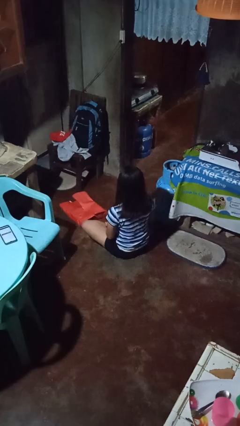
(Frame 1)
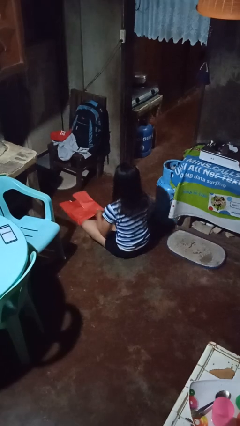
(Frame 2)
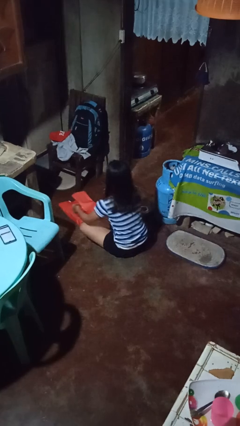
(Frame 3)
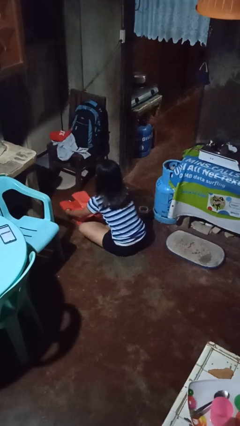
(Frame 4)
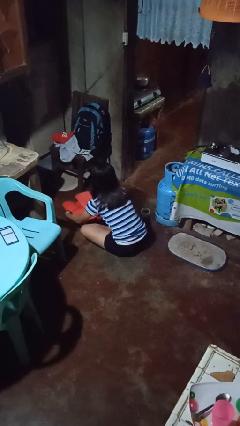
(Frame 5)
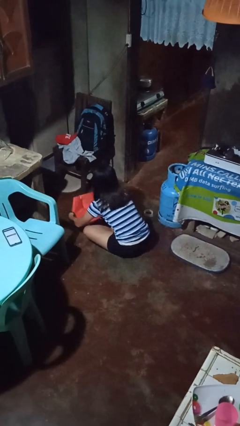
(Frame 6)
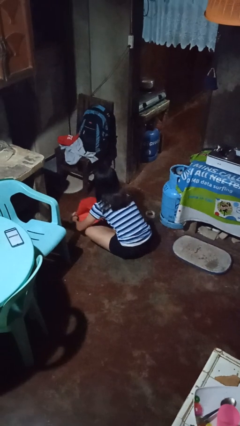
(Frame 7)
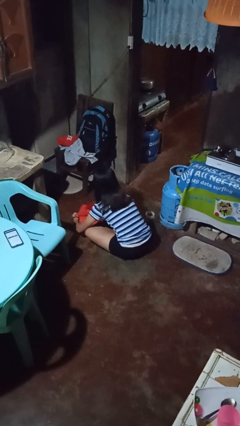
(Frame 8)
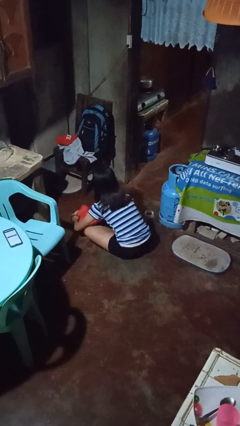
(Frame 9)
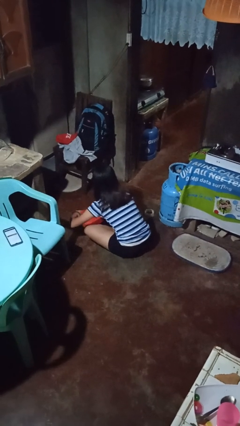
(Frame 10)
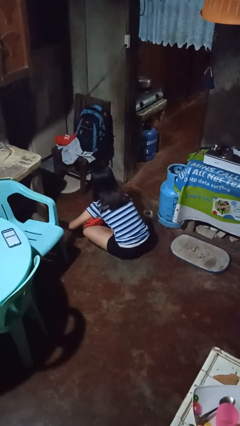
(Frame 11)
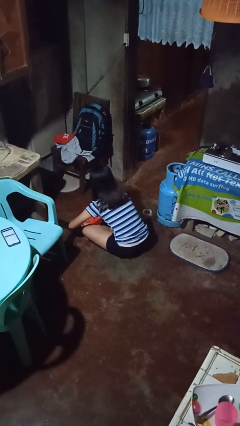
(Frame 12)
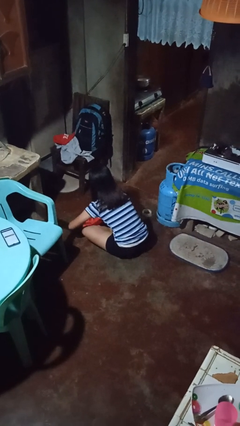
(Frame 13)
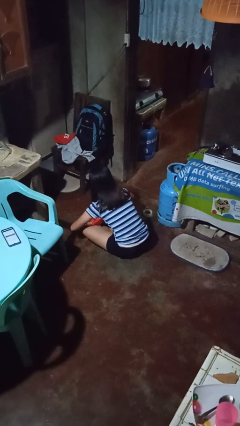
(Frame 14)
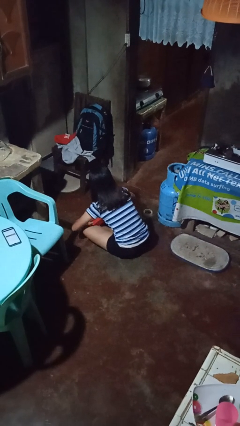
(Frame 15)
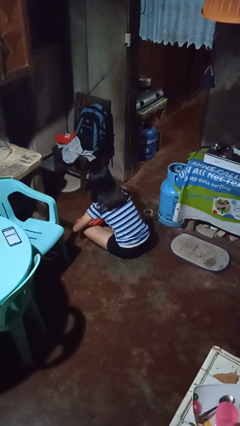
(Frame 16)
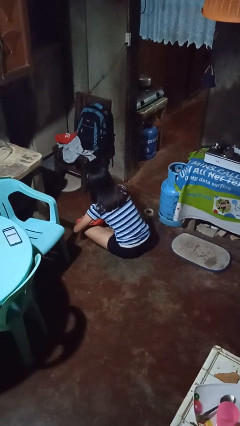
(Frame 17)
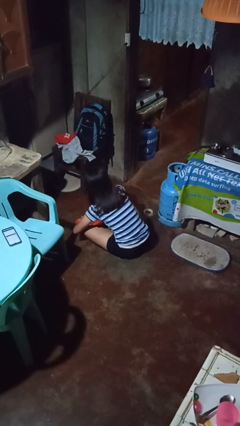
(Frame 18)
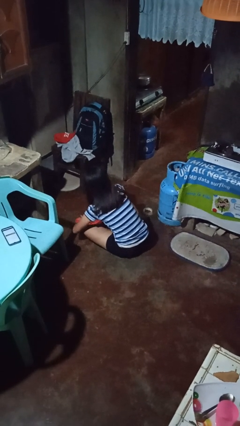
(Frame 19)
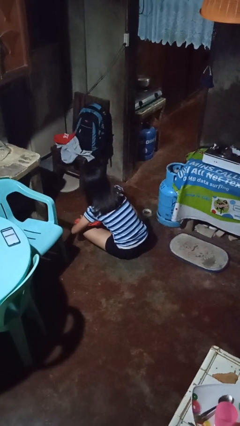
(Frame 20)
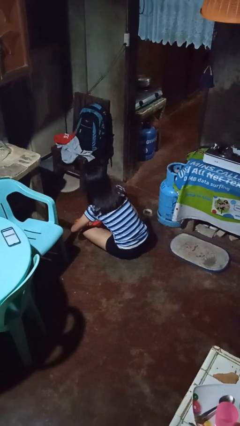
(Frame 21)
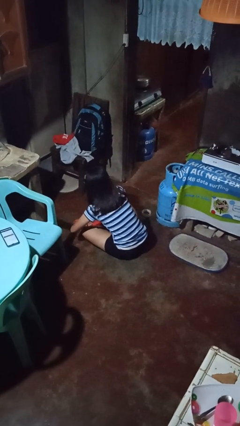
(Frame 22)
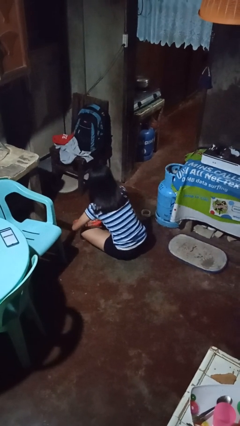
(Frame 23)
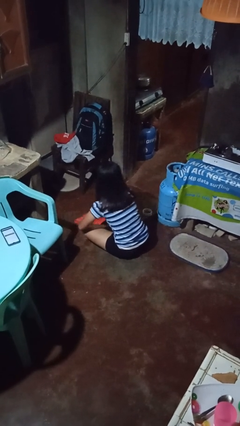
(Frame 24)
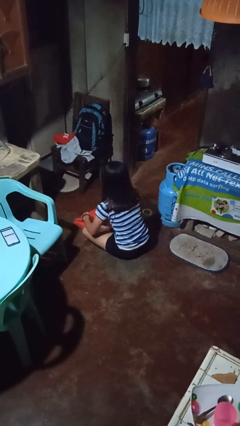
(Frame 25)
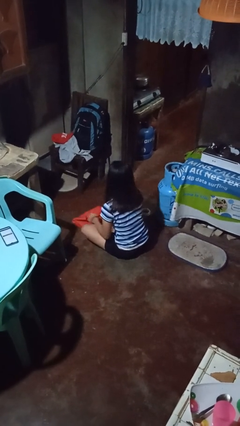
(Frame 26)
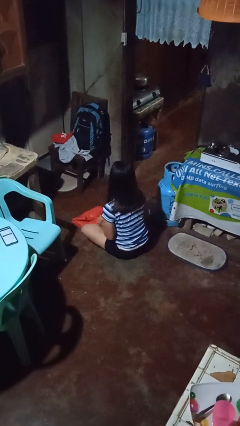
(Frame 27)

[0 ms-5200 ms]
person wraps box

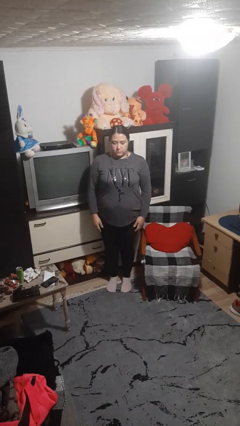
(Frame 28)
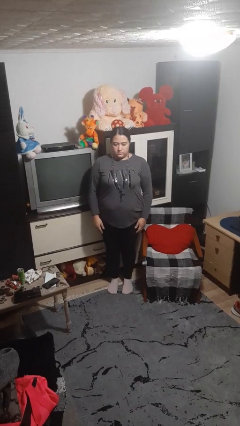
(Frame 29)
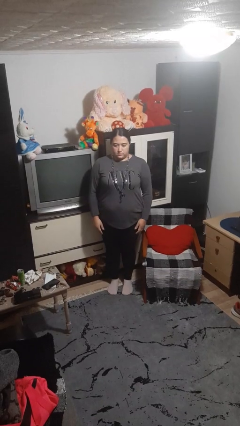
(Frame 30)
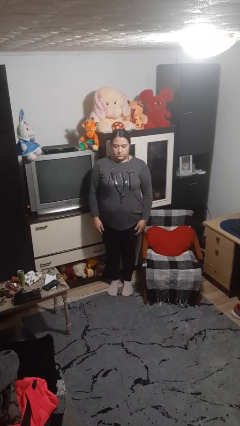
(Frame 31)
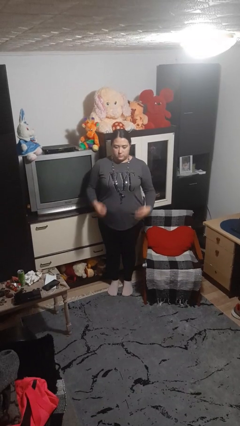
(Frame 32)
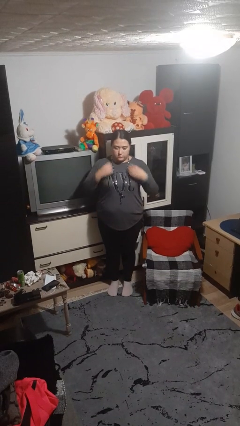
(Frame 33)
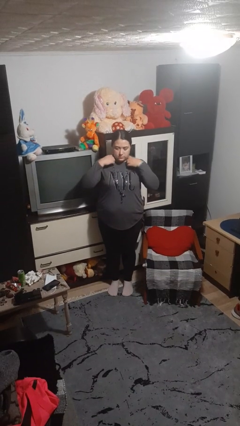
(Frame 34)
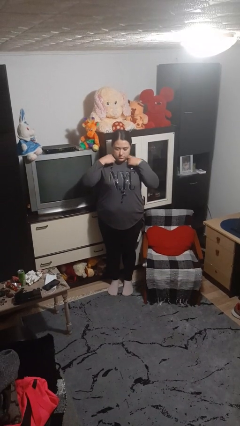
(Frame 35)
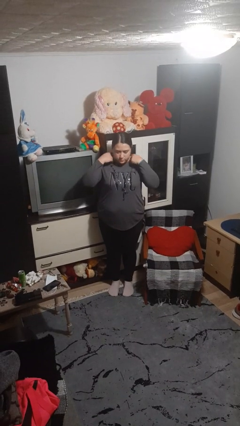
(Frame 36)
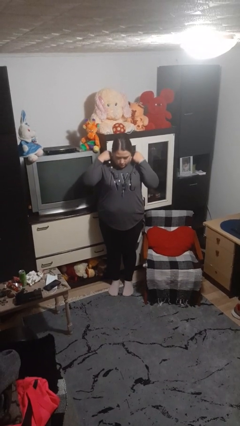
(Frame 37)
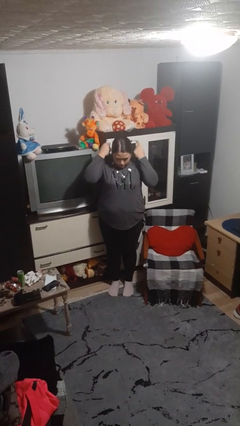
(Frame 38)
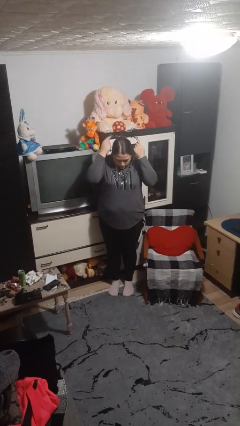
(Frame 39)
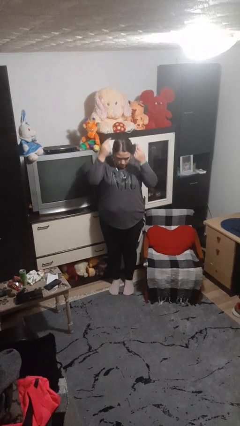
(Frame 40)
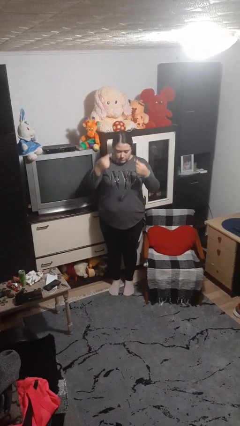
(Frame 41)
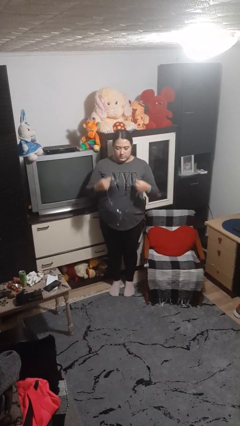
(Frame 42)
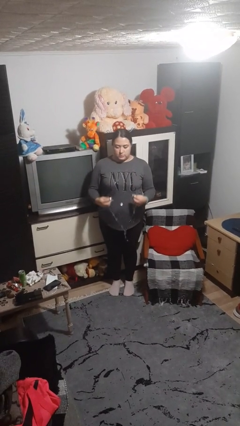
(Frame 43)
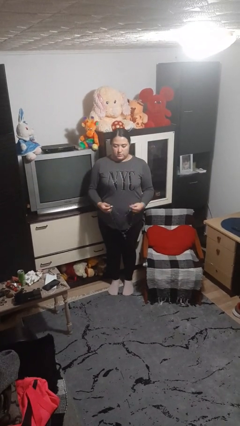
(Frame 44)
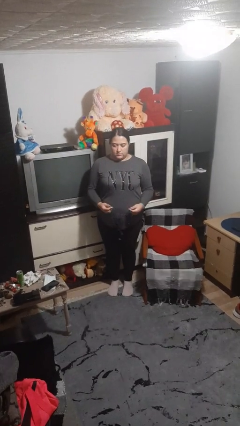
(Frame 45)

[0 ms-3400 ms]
person takes off necklace

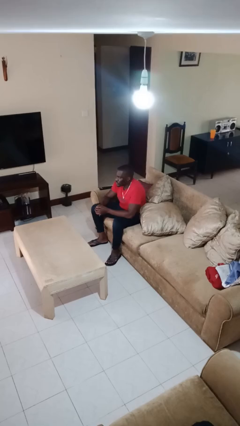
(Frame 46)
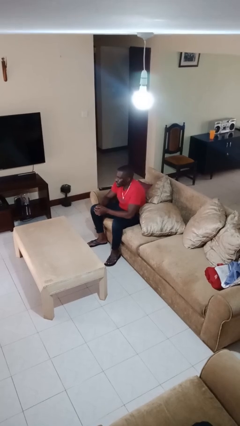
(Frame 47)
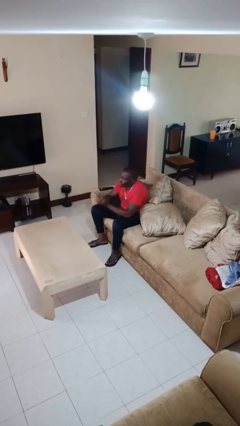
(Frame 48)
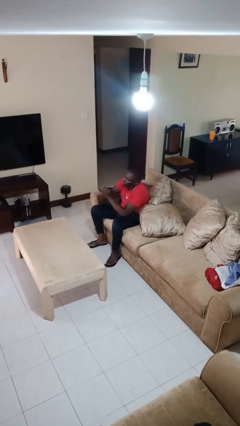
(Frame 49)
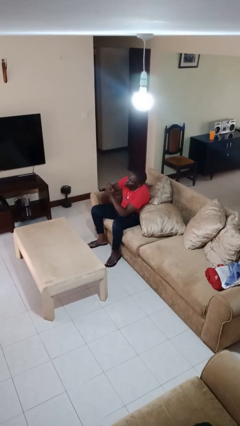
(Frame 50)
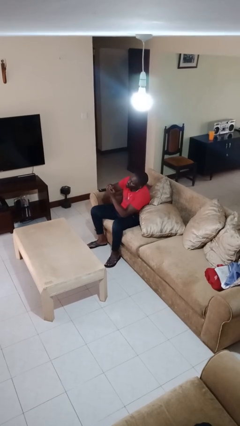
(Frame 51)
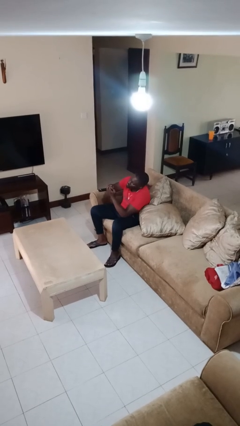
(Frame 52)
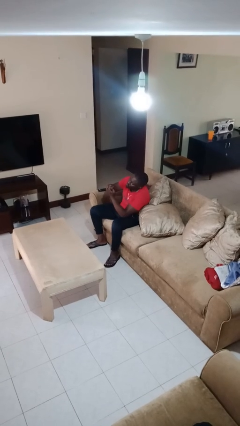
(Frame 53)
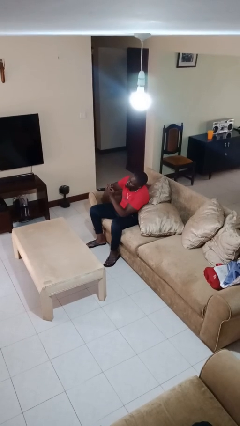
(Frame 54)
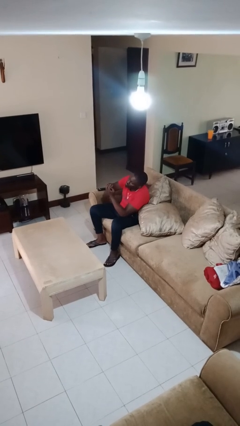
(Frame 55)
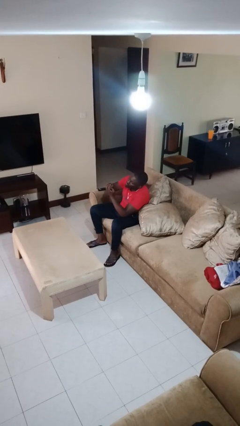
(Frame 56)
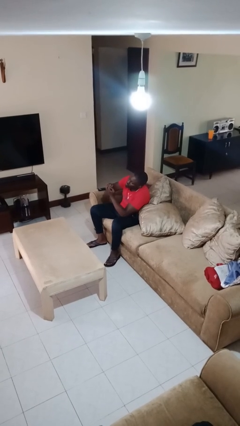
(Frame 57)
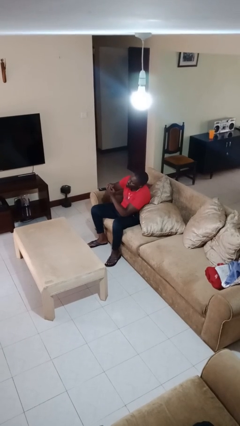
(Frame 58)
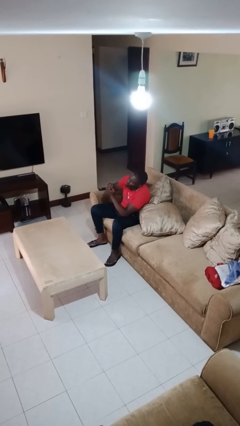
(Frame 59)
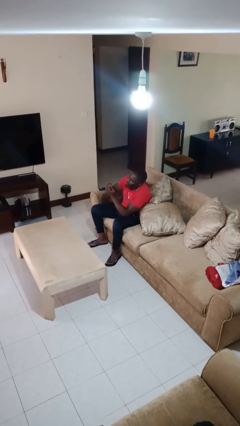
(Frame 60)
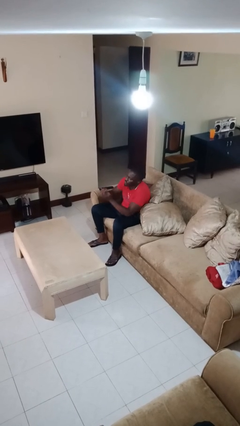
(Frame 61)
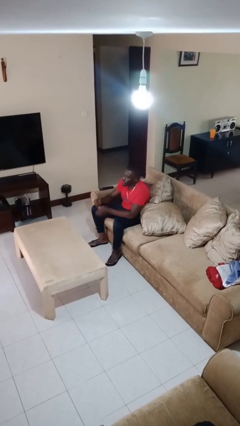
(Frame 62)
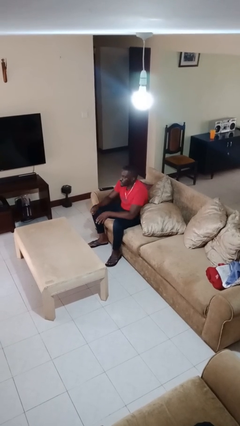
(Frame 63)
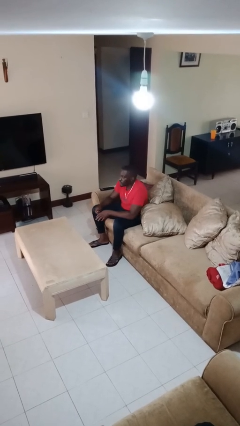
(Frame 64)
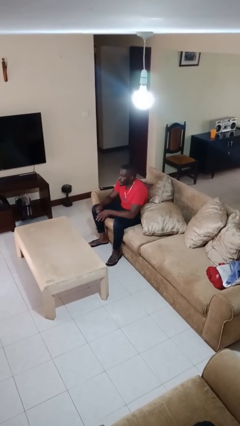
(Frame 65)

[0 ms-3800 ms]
person clips fingernails

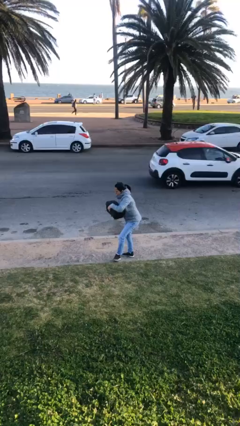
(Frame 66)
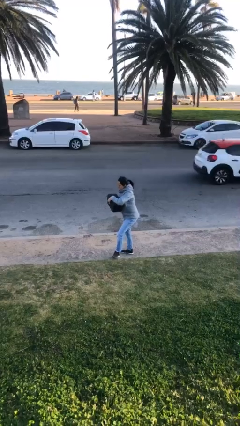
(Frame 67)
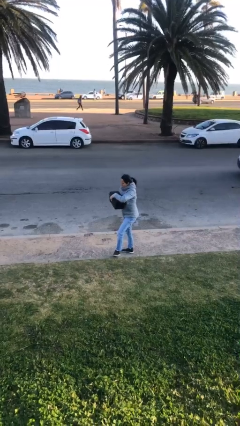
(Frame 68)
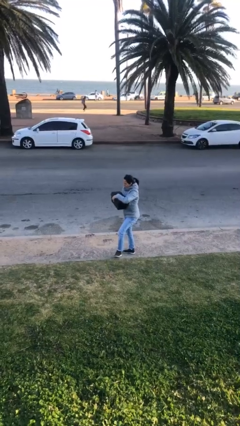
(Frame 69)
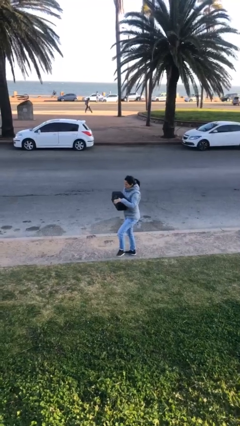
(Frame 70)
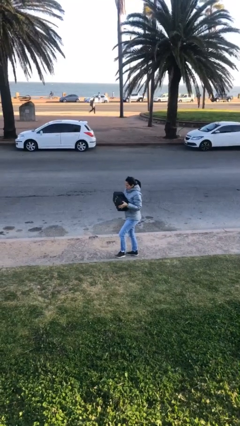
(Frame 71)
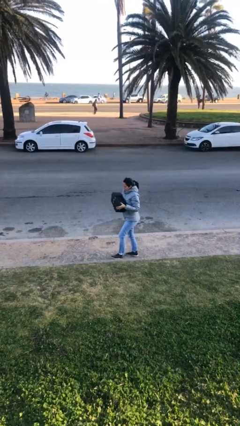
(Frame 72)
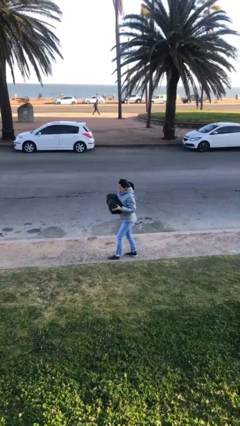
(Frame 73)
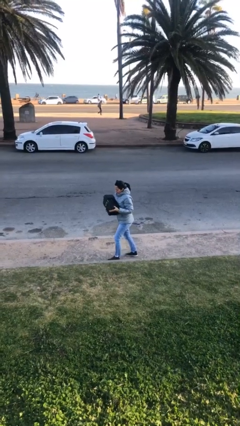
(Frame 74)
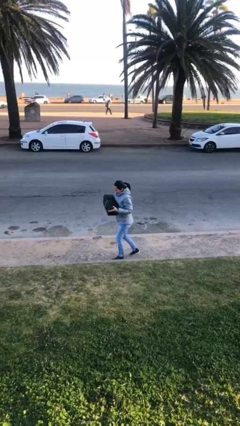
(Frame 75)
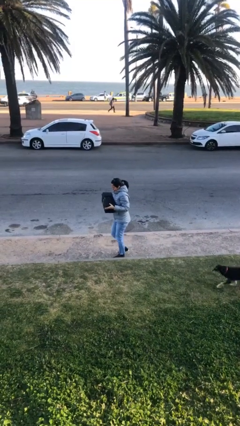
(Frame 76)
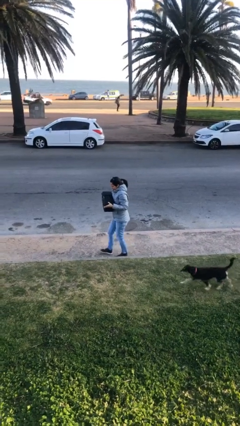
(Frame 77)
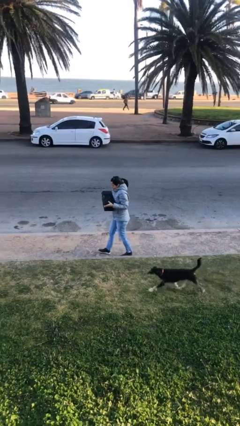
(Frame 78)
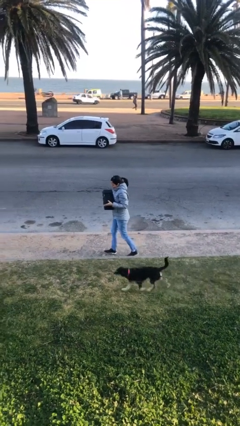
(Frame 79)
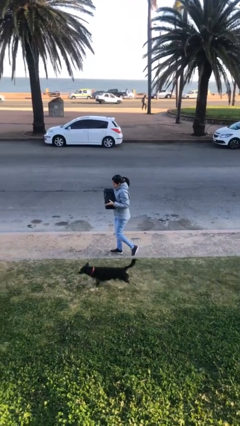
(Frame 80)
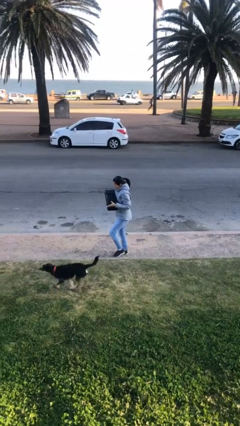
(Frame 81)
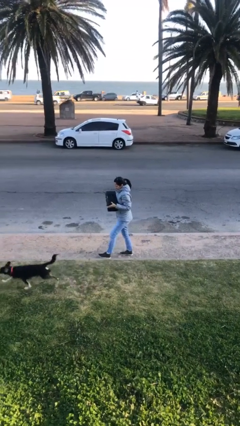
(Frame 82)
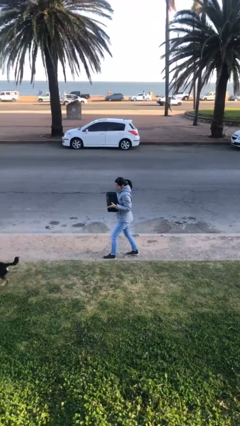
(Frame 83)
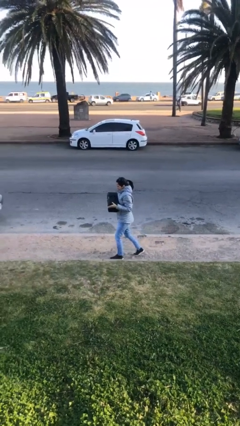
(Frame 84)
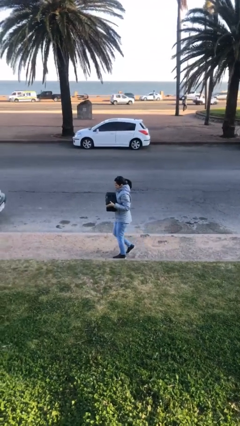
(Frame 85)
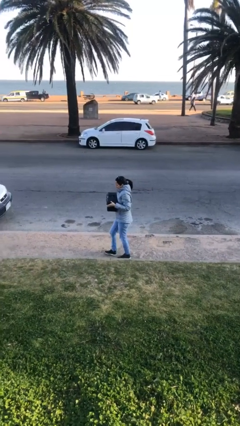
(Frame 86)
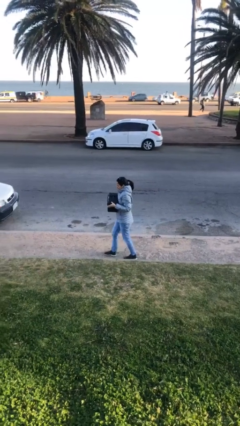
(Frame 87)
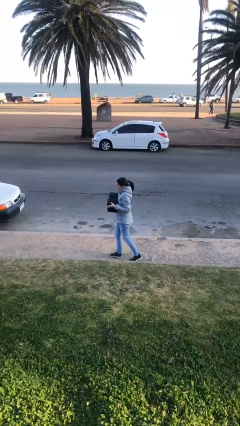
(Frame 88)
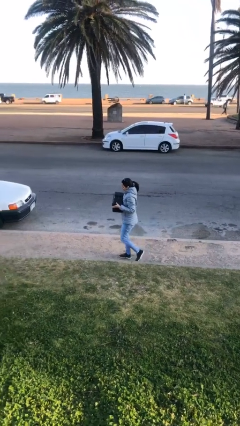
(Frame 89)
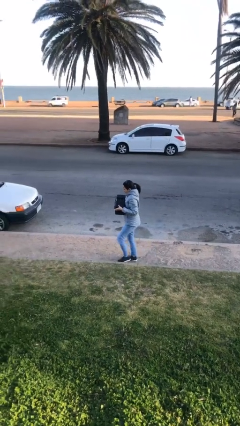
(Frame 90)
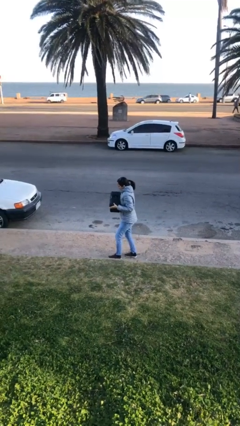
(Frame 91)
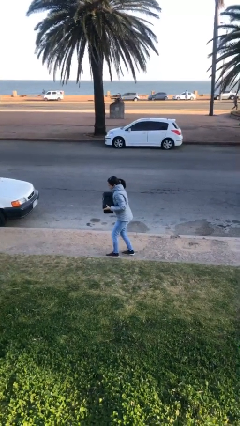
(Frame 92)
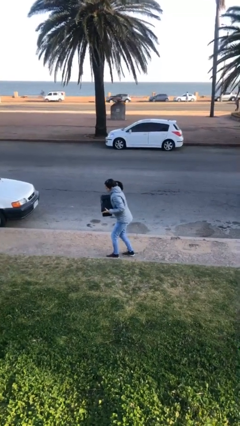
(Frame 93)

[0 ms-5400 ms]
person carries heavy object

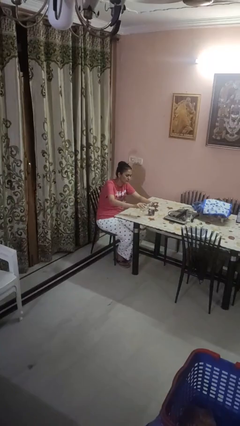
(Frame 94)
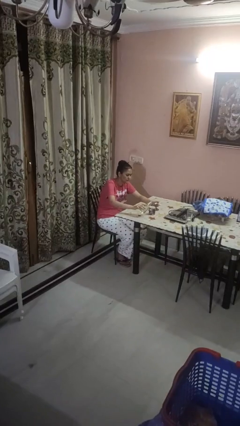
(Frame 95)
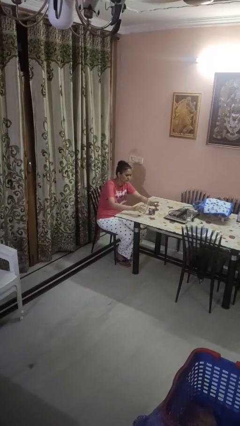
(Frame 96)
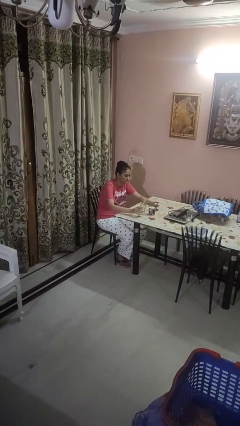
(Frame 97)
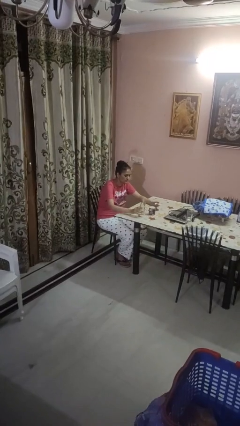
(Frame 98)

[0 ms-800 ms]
person pours liquid into cup
